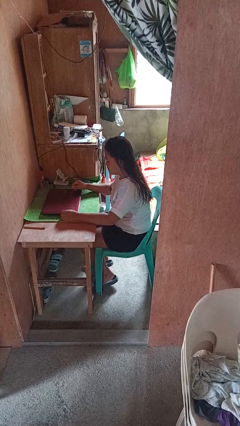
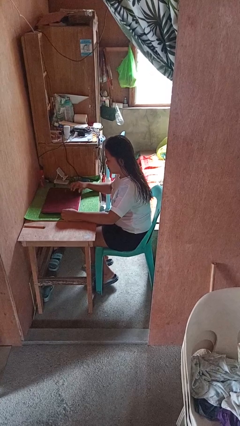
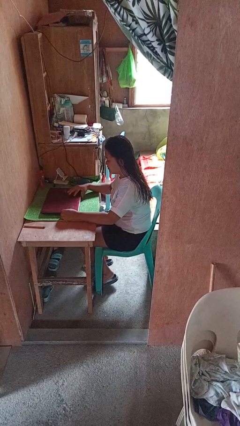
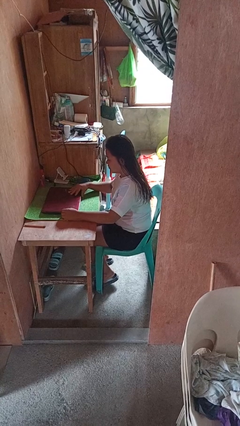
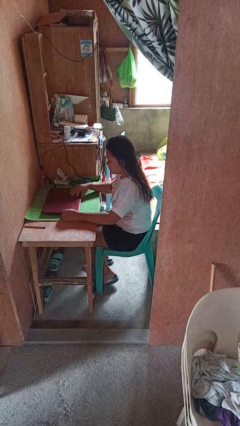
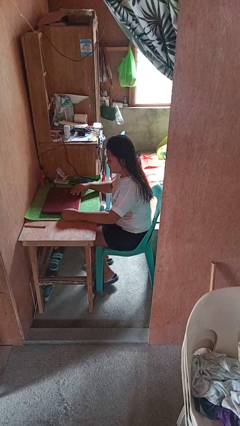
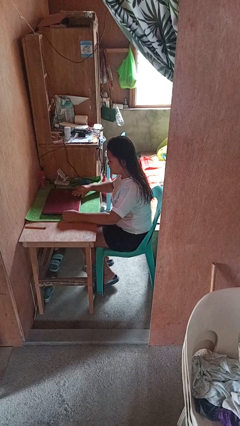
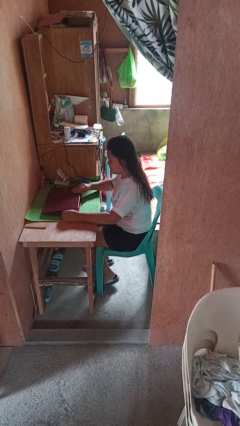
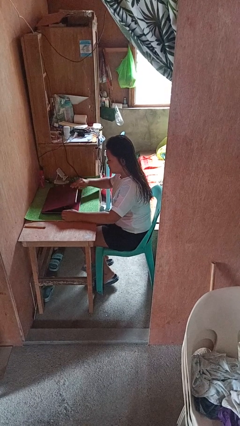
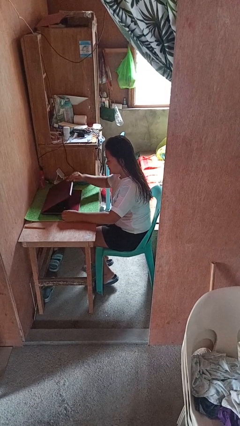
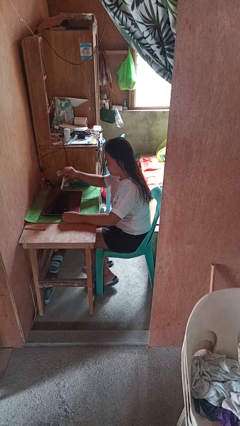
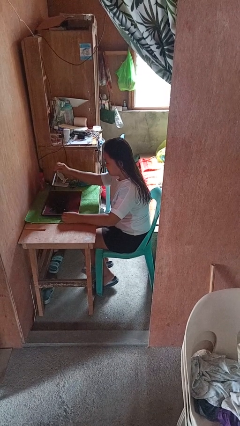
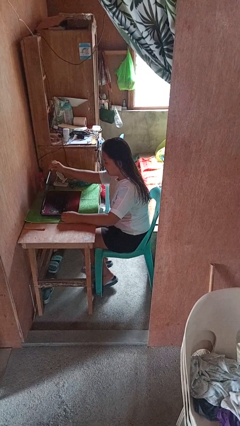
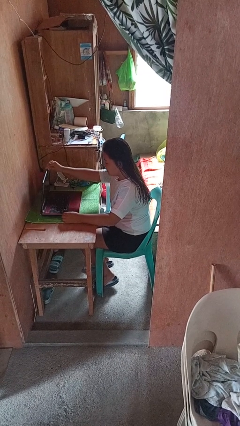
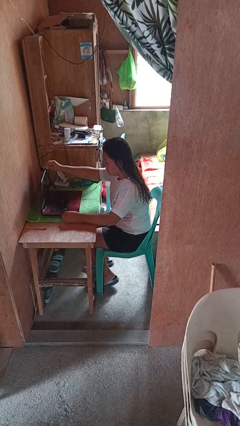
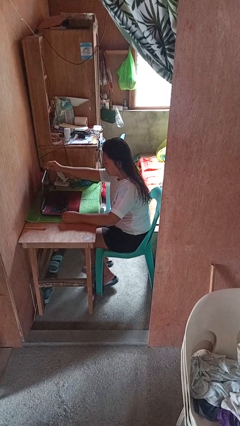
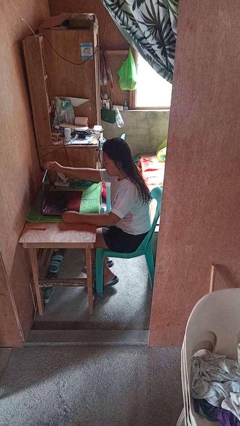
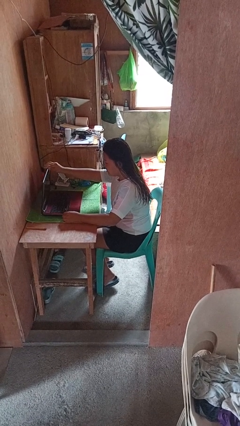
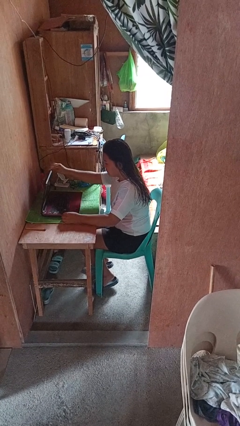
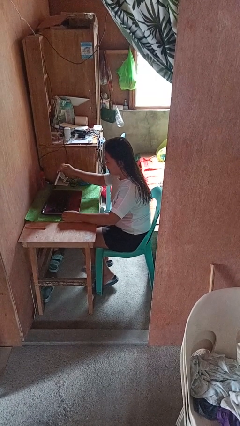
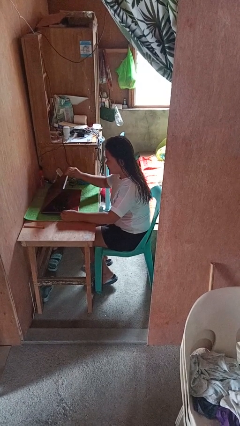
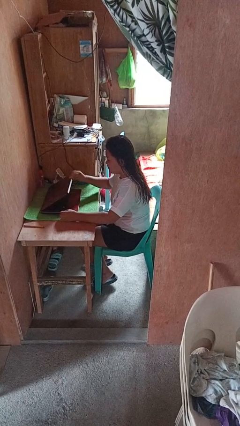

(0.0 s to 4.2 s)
person opens laptop

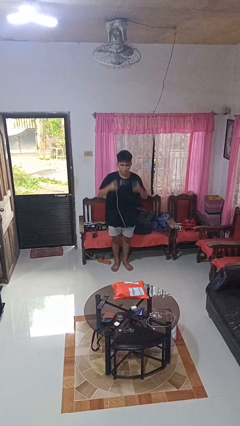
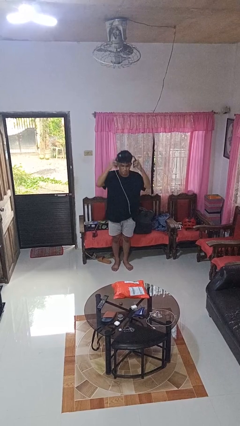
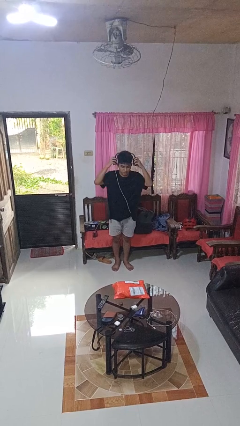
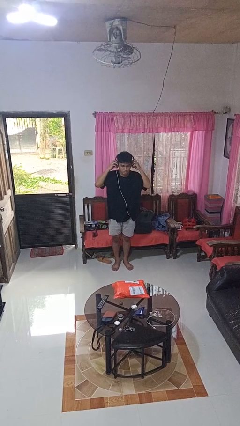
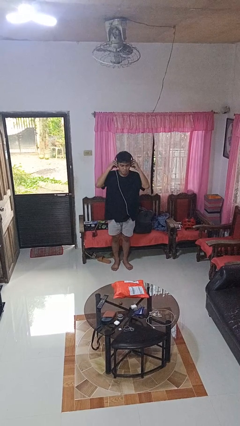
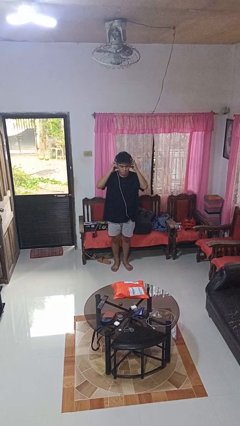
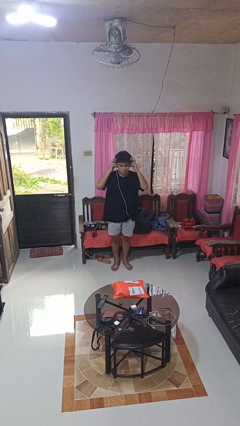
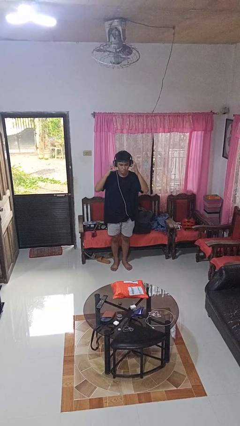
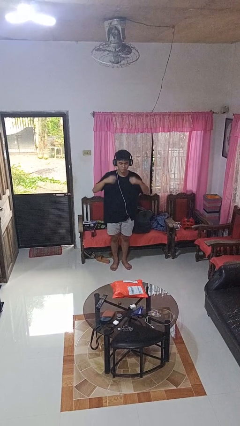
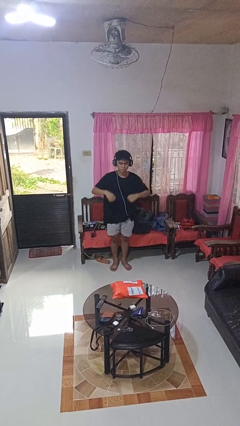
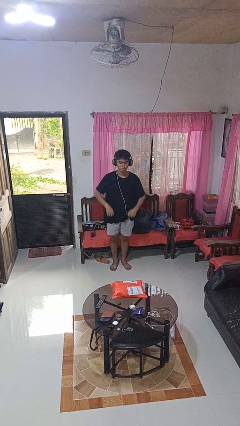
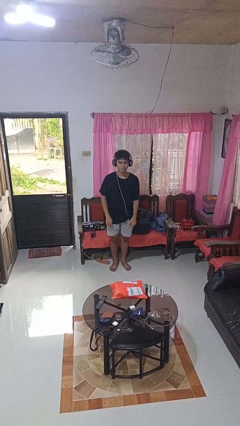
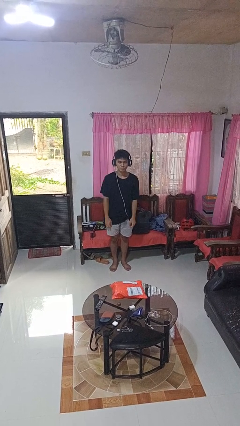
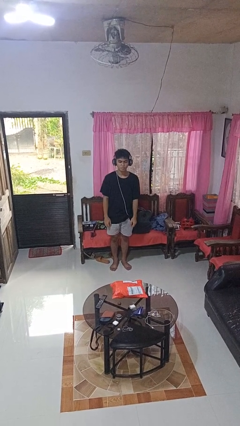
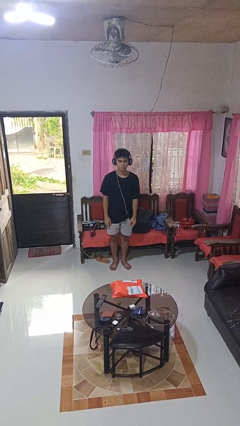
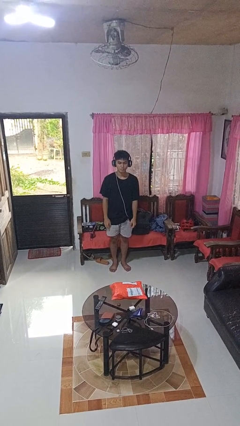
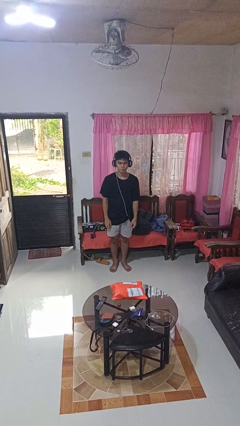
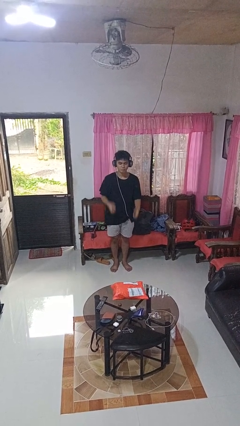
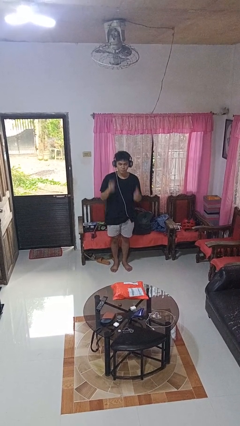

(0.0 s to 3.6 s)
person puts on headphones

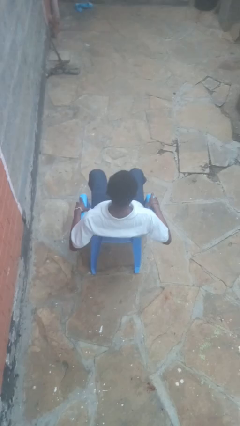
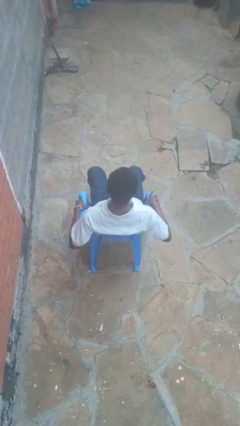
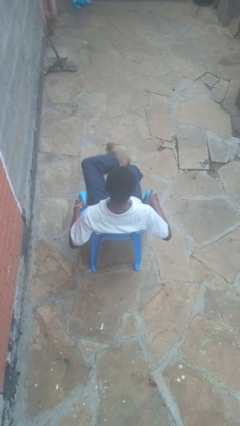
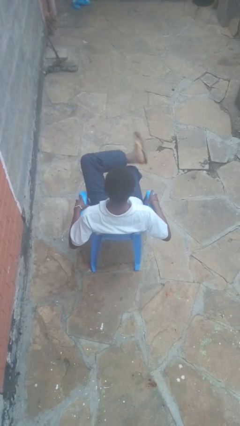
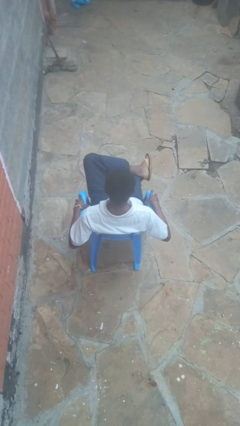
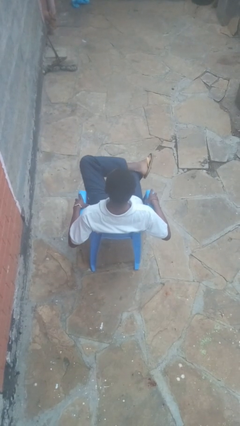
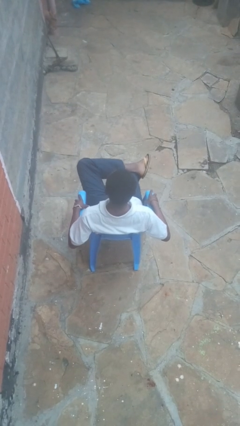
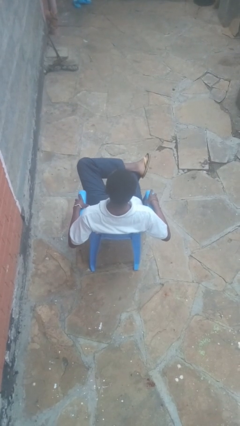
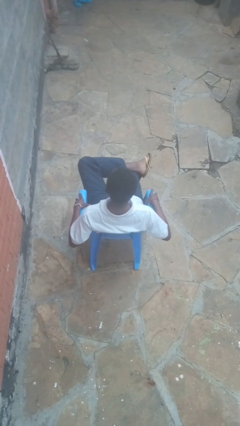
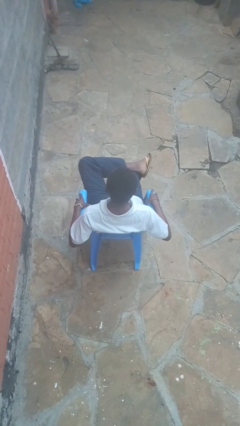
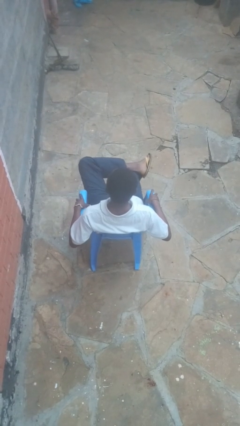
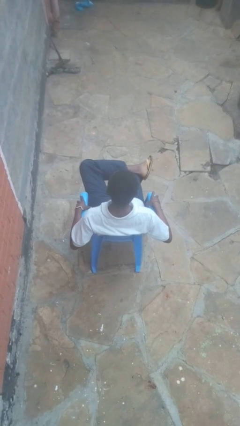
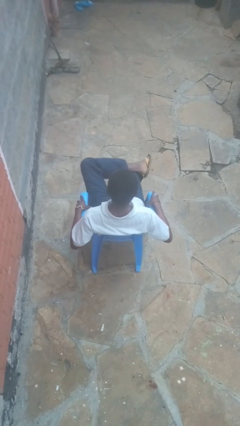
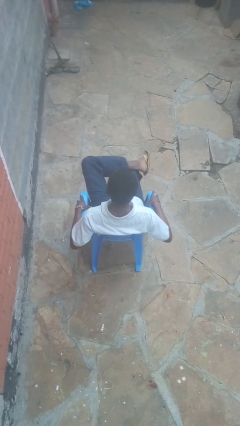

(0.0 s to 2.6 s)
person crosses legs

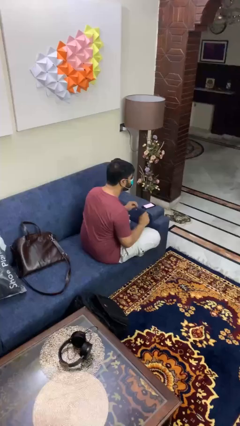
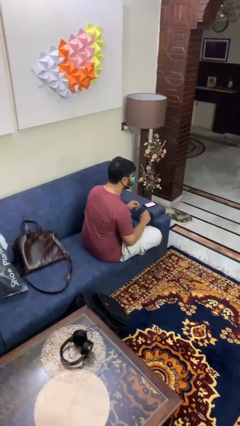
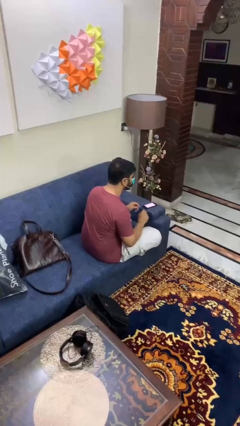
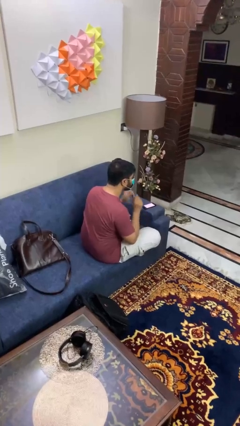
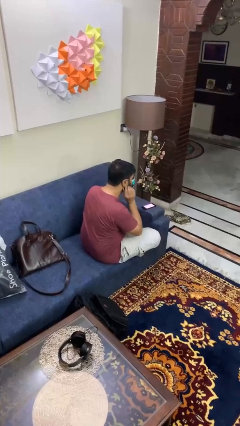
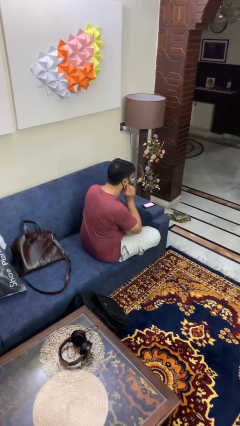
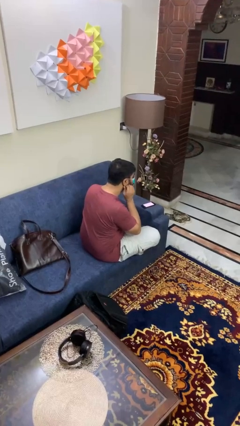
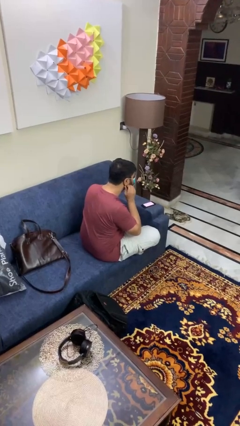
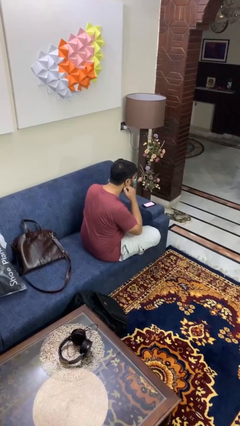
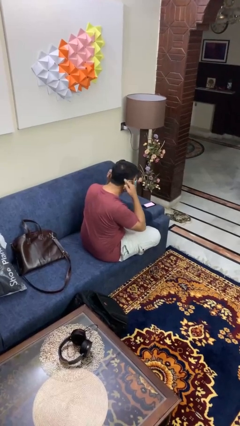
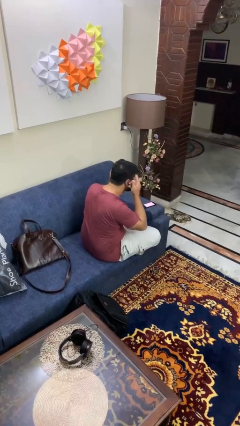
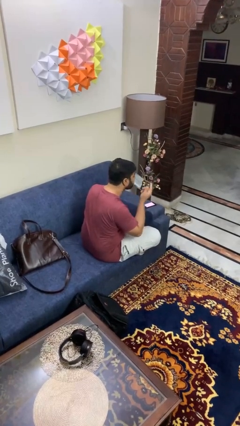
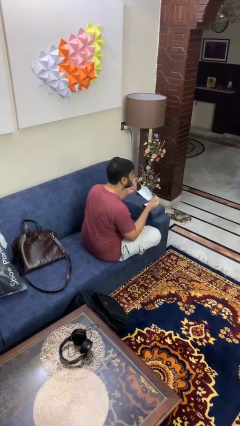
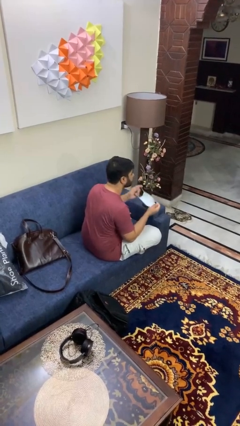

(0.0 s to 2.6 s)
person takes off facemask

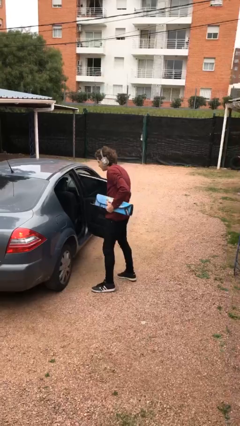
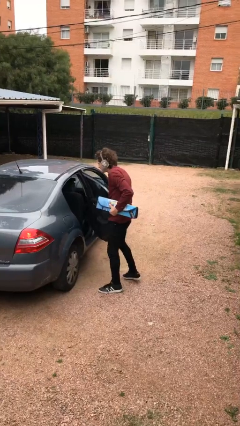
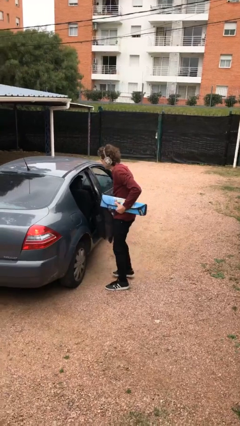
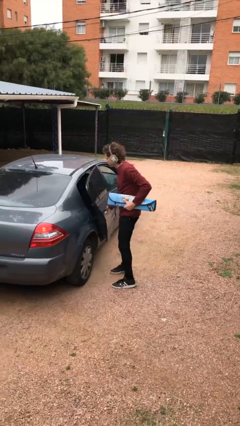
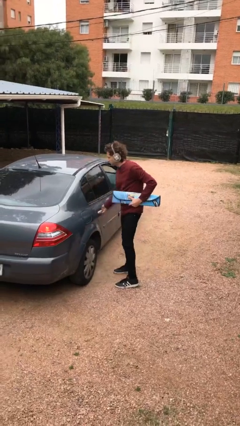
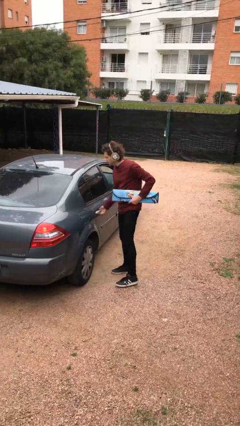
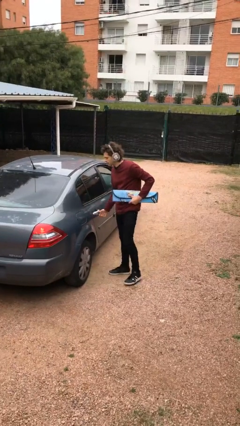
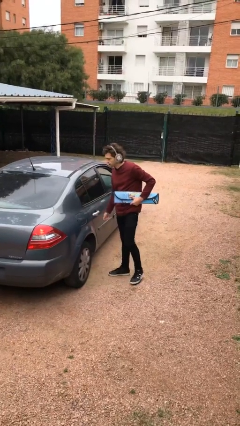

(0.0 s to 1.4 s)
person closes car door

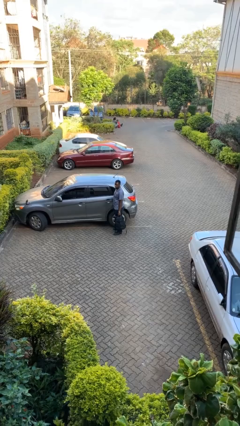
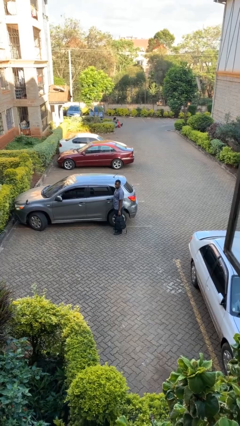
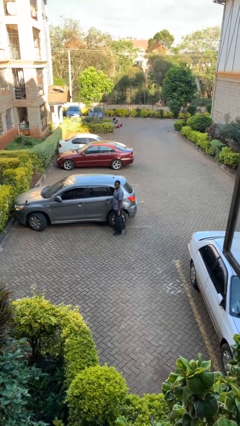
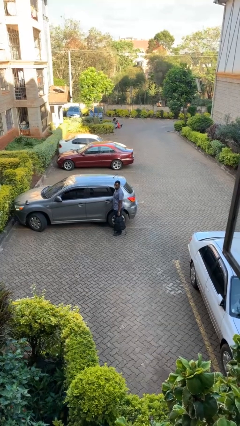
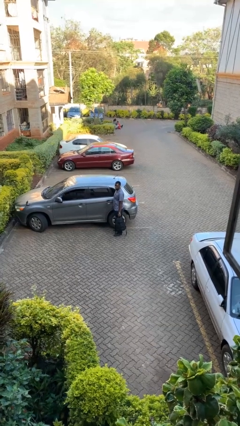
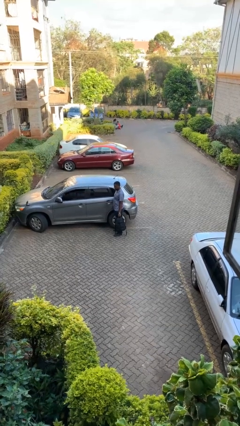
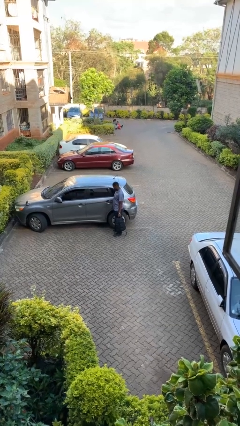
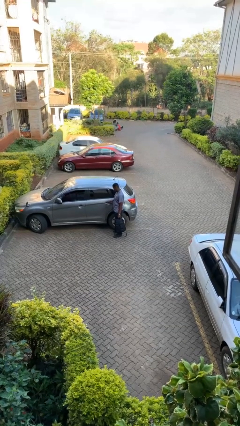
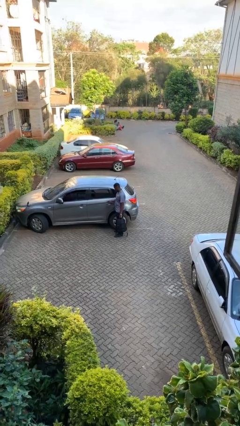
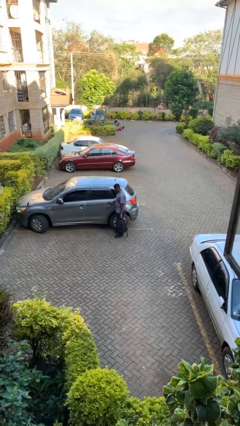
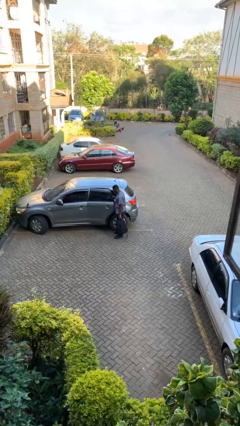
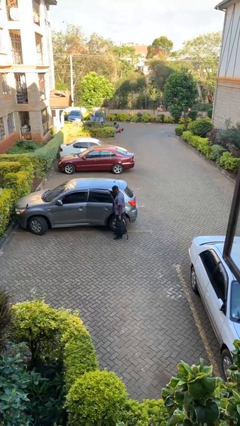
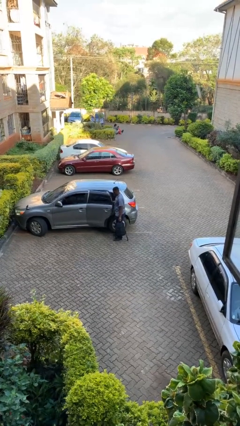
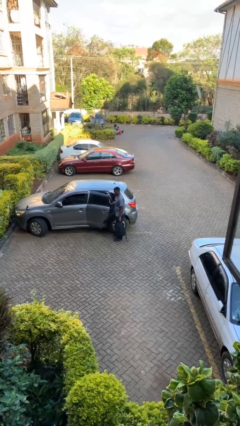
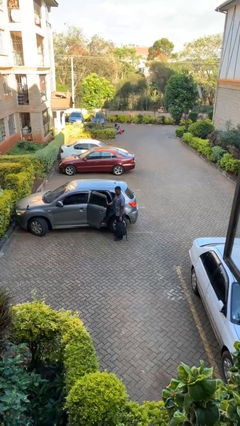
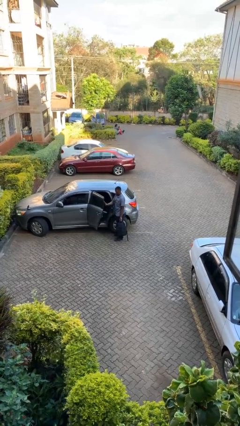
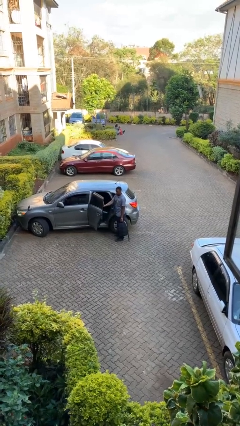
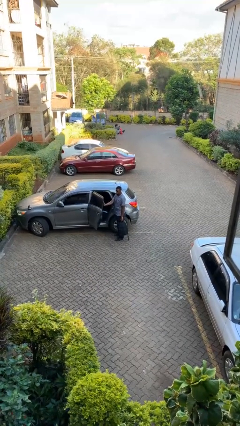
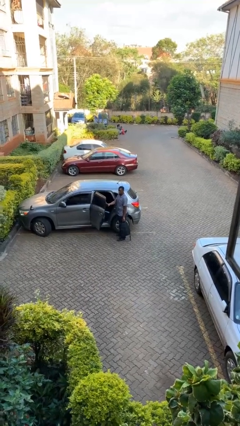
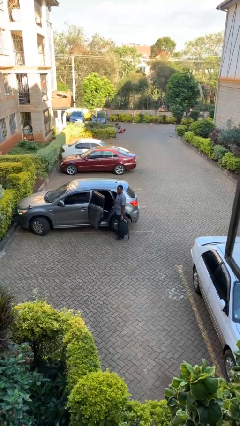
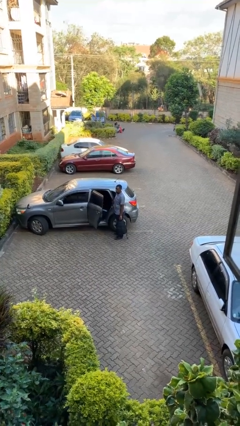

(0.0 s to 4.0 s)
person opens car door
